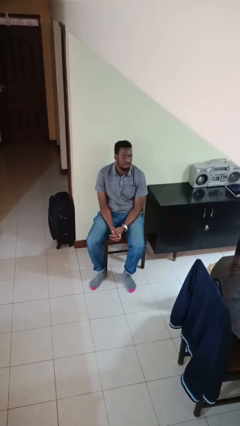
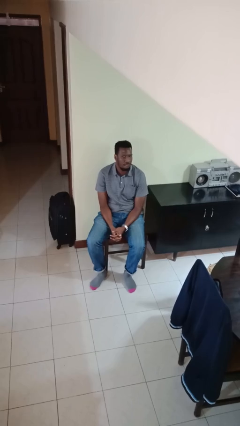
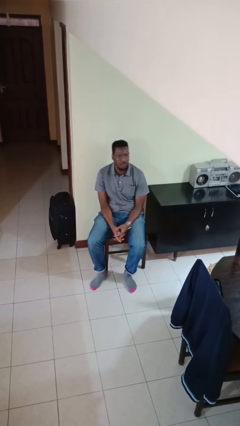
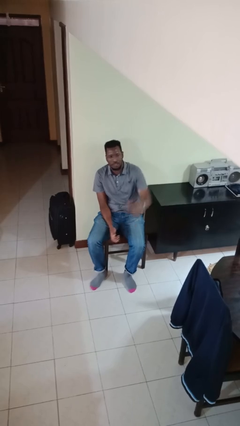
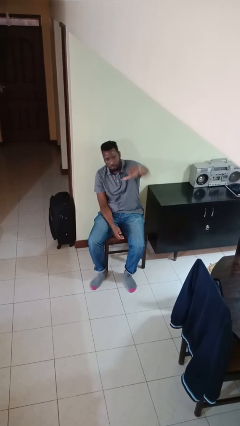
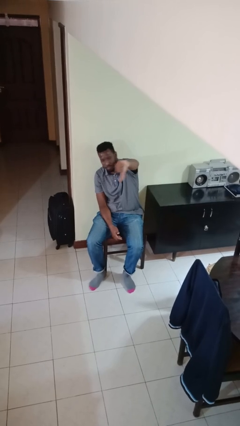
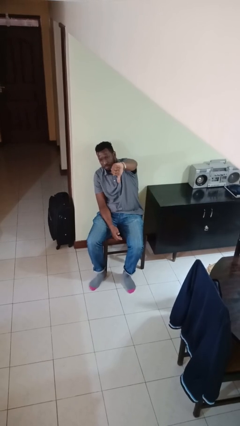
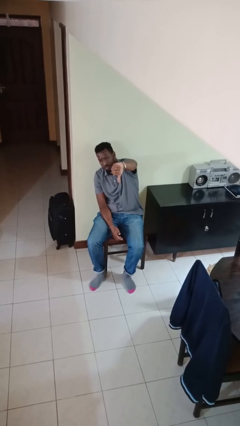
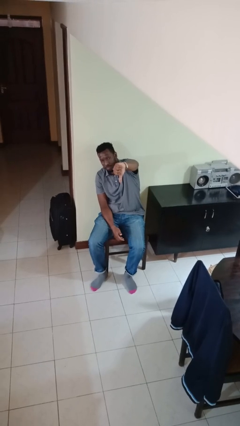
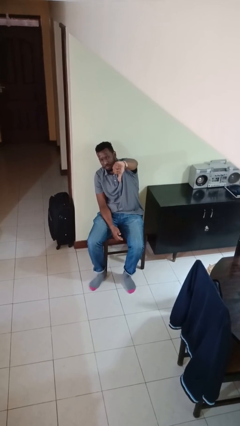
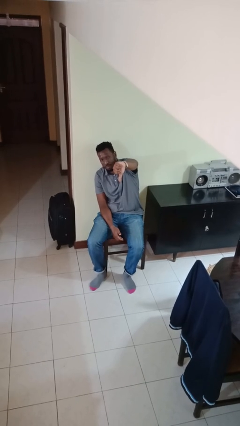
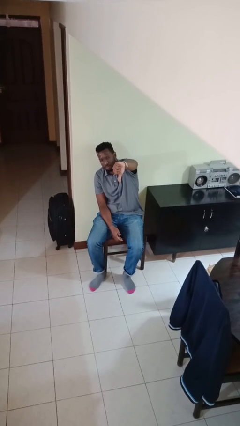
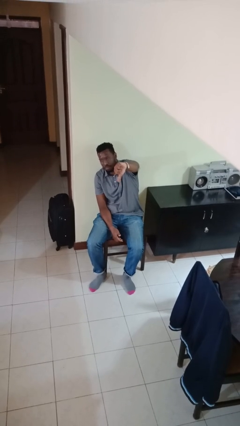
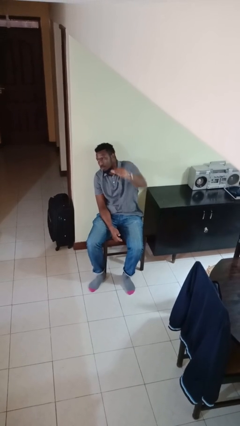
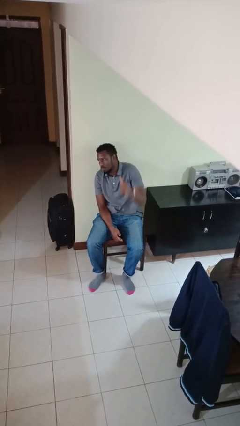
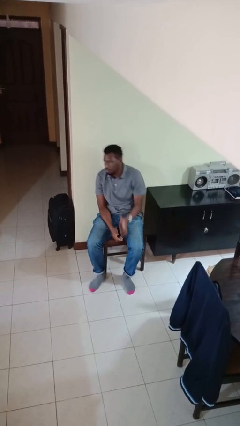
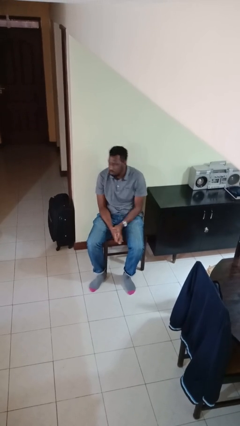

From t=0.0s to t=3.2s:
person gestures thumbs down

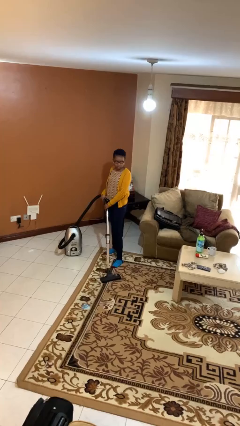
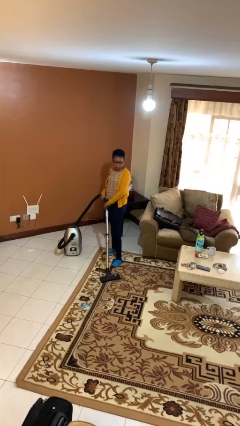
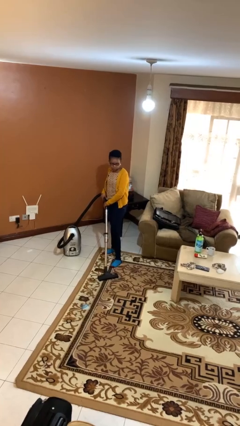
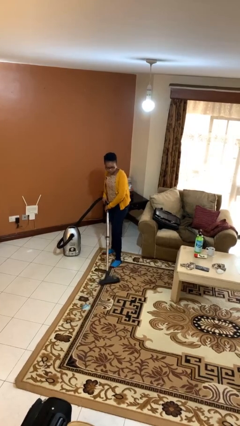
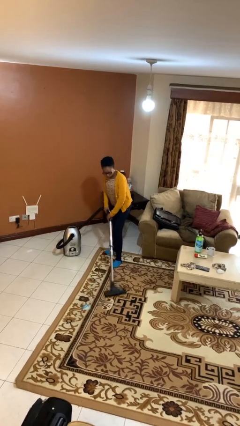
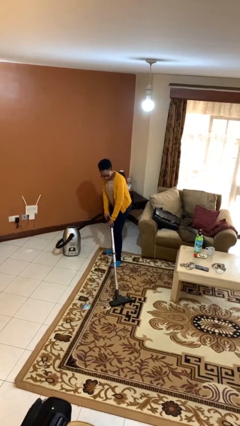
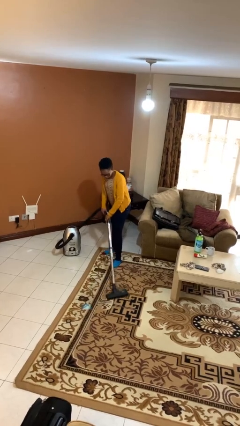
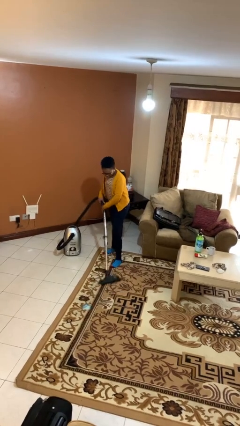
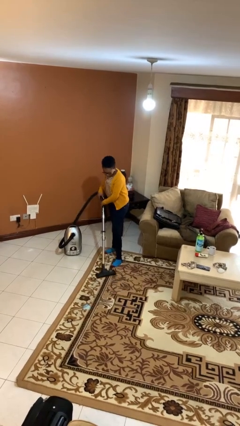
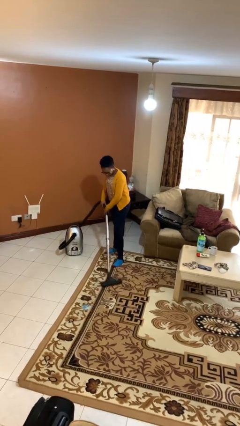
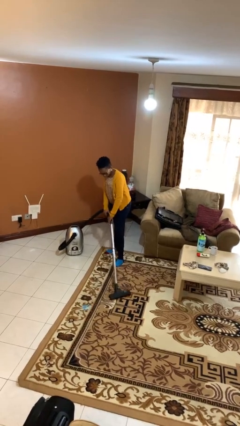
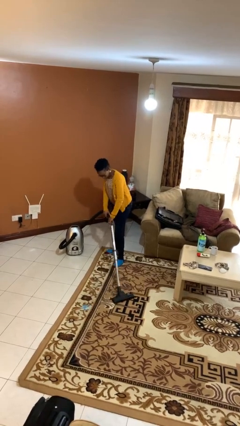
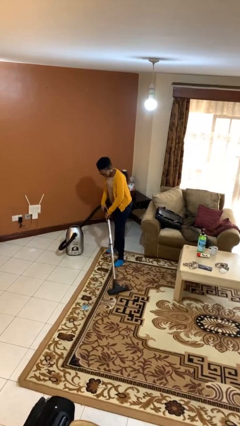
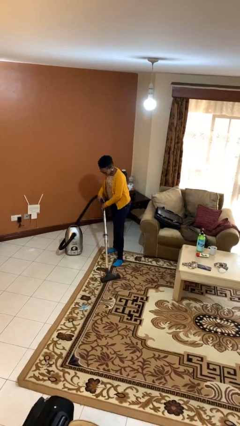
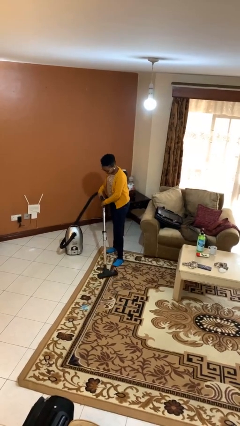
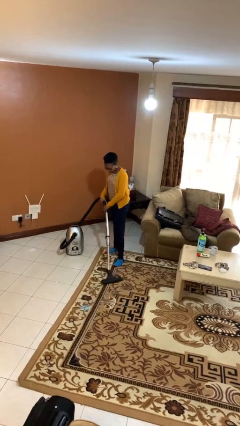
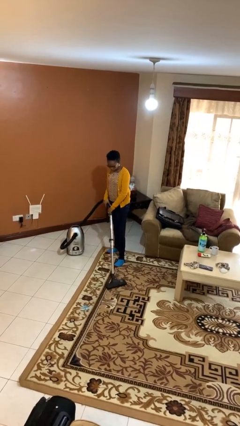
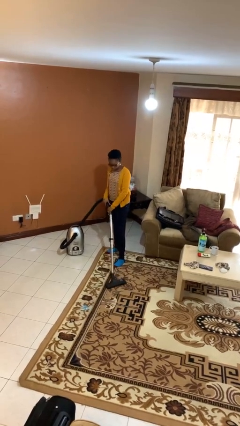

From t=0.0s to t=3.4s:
person vacuums carpet

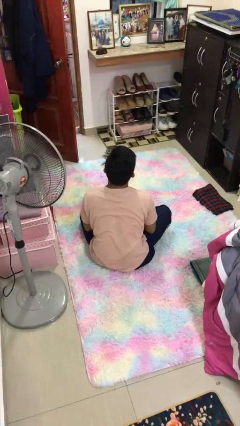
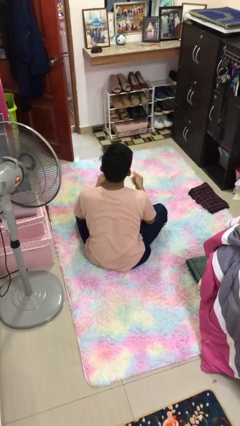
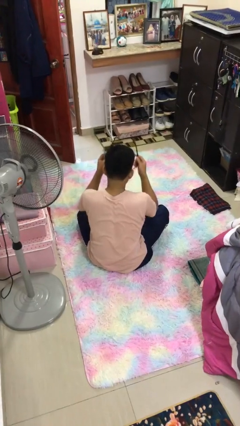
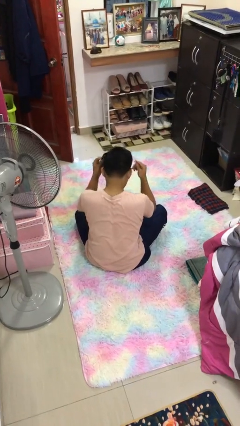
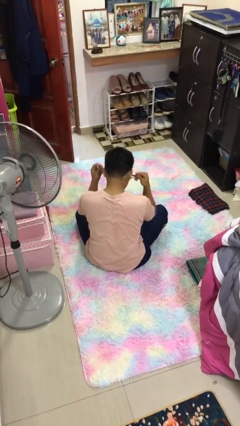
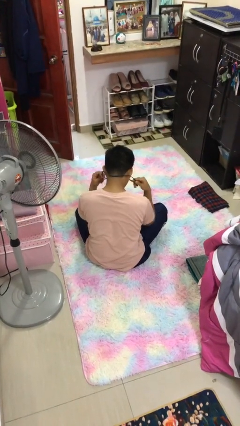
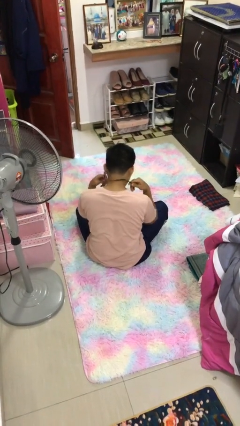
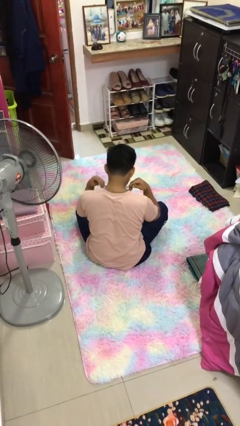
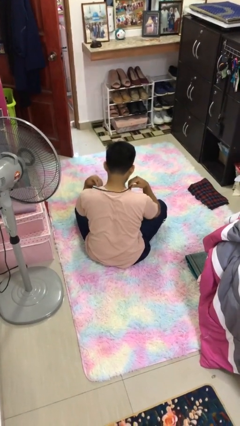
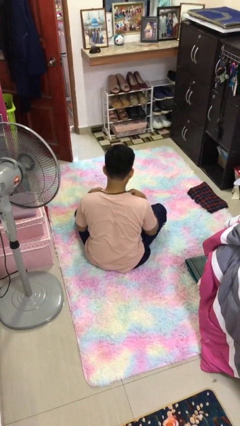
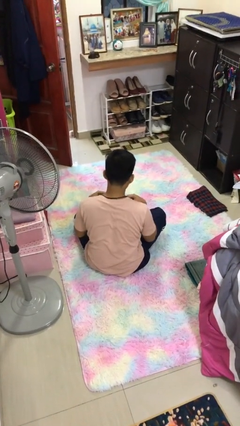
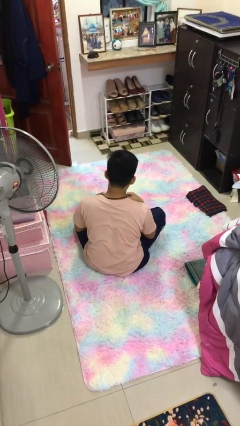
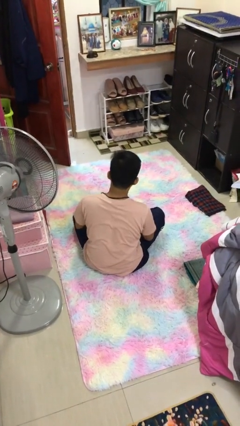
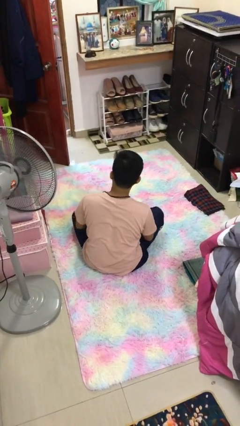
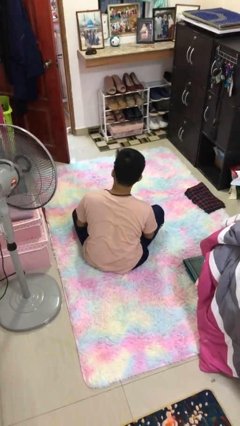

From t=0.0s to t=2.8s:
person puts on necklace

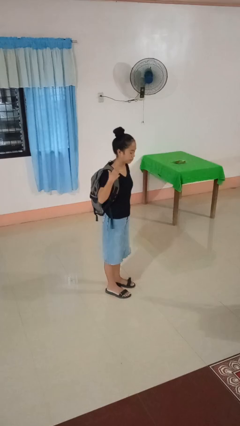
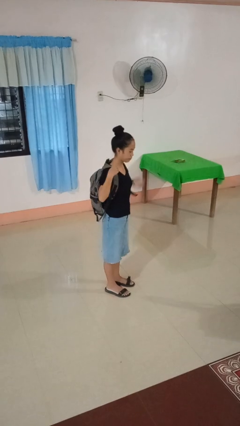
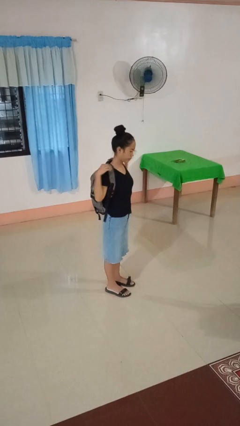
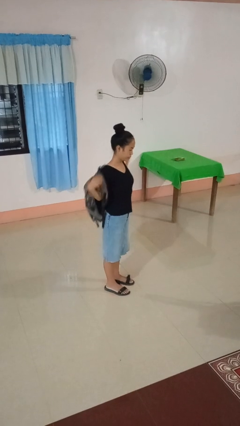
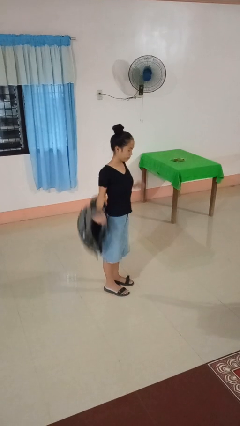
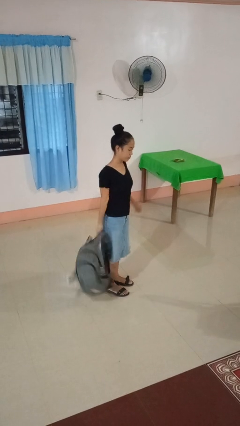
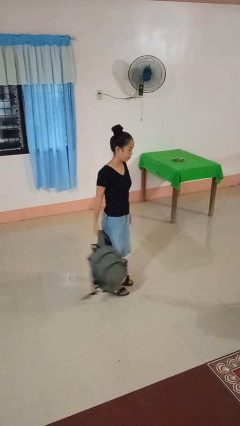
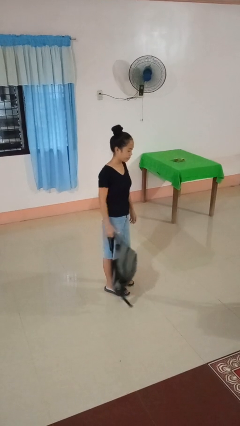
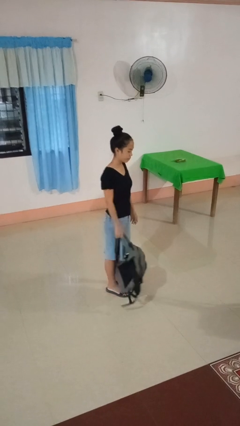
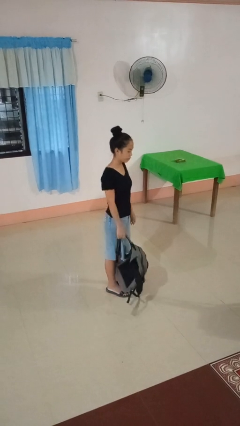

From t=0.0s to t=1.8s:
person takes off backpack

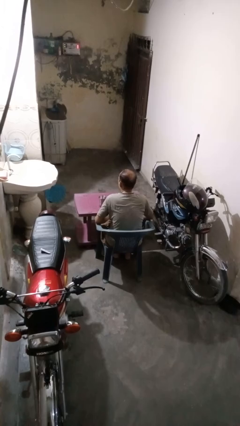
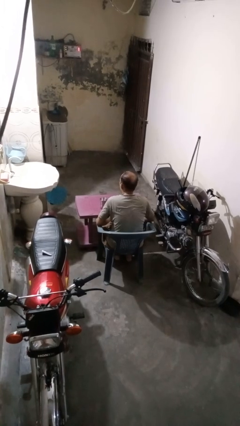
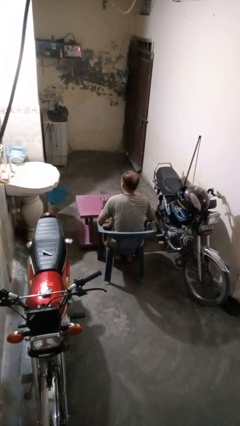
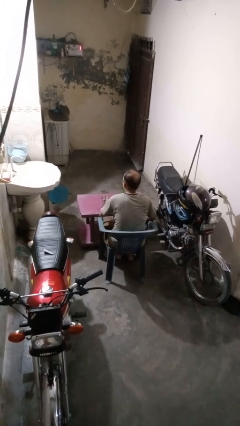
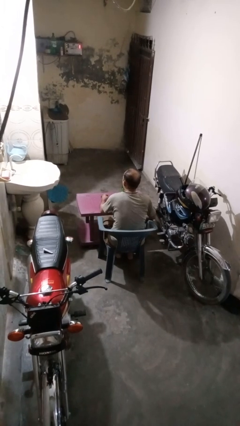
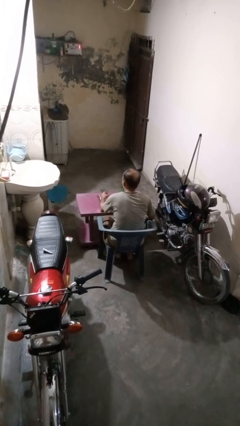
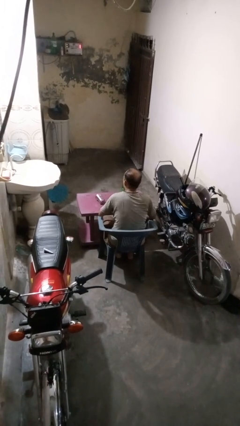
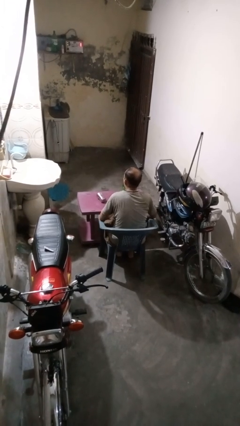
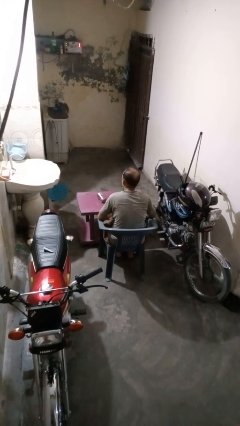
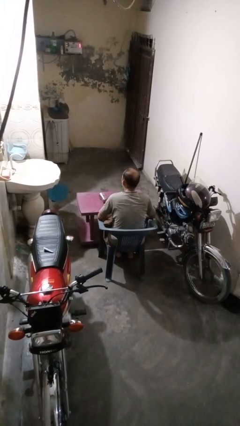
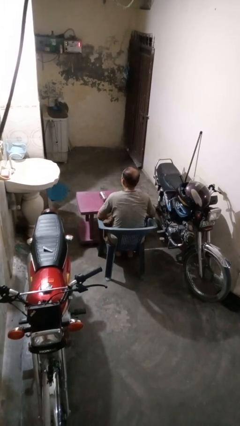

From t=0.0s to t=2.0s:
person knocks over glass

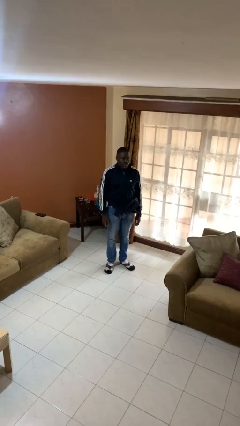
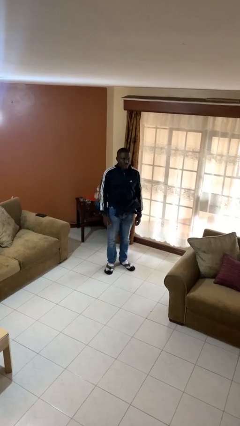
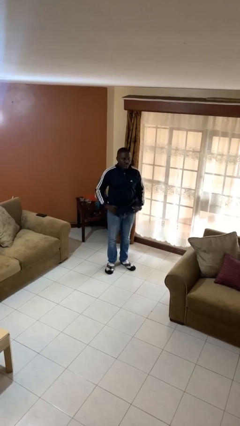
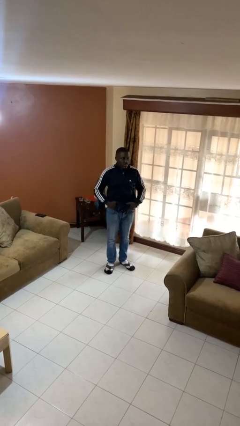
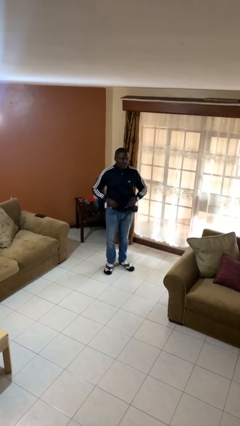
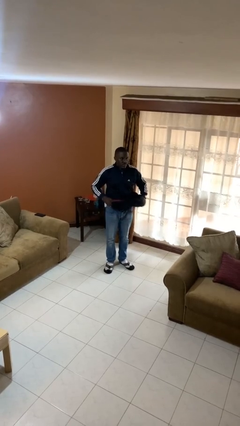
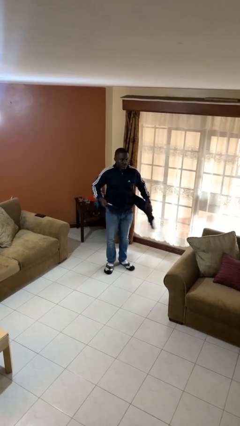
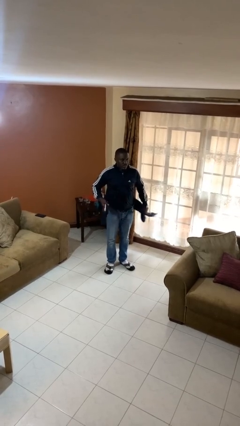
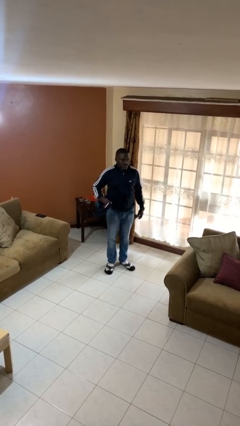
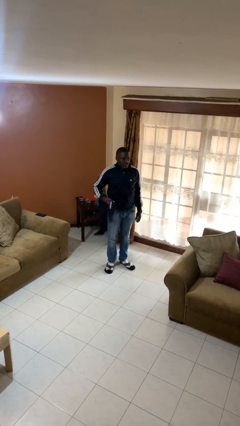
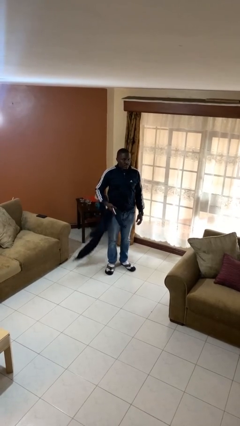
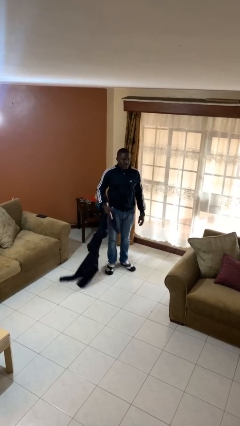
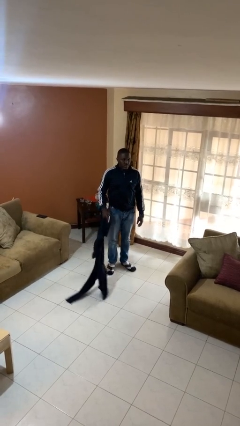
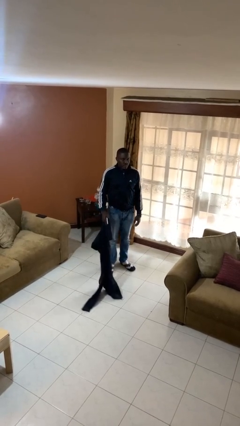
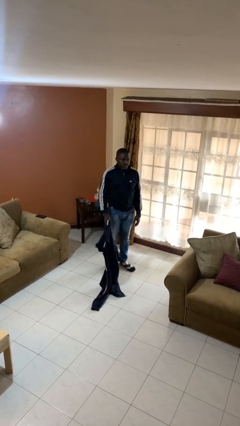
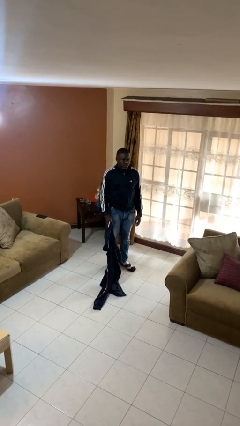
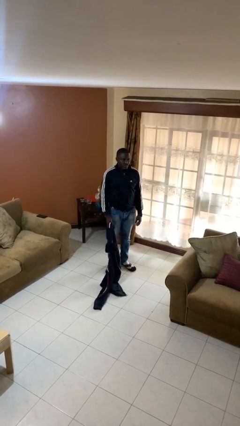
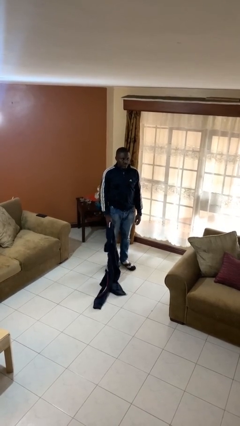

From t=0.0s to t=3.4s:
person unties jacket around waist

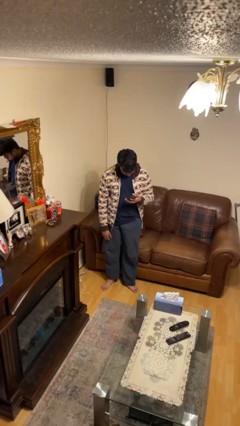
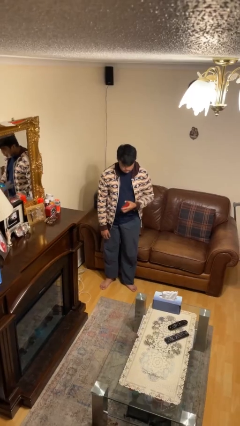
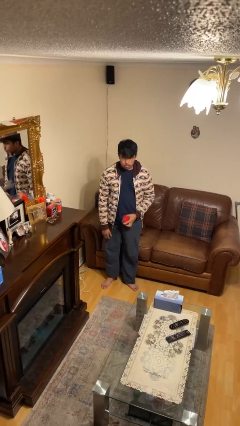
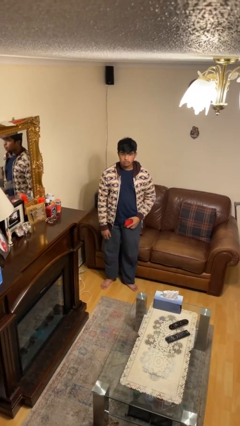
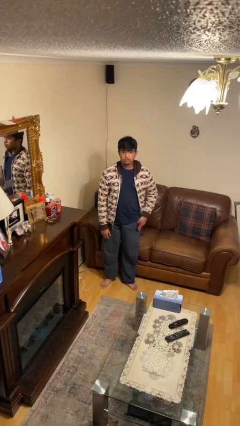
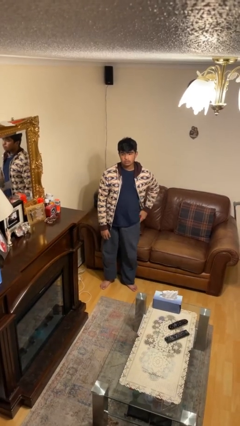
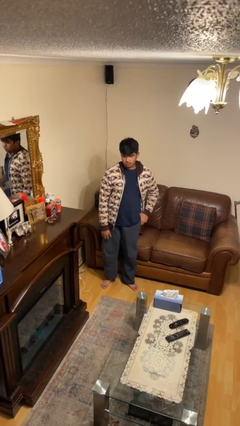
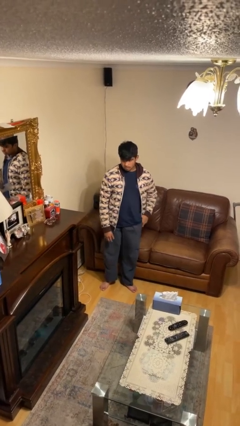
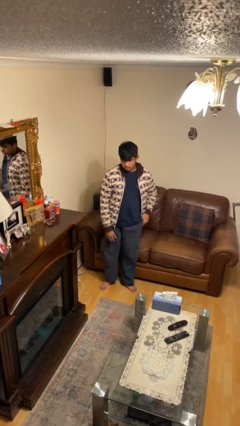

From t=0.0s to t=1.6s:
person puts phone into pocket
